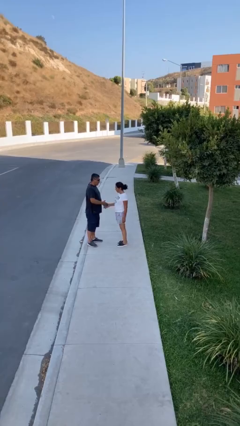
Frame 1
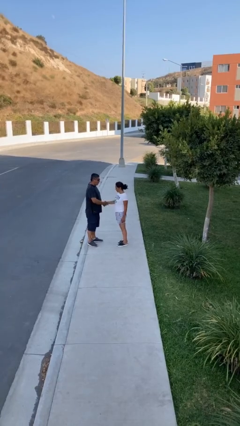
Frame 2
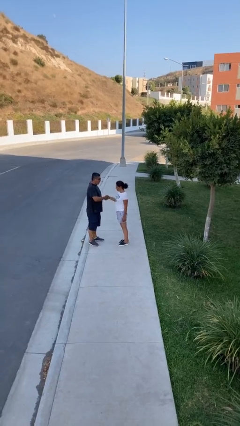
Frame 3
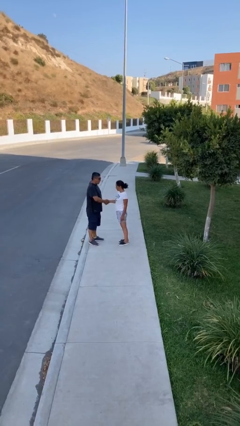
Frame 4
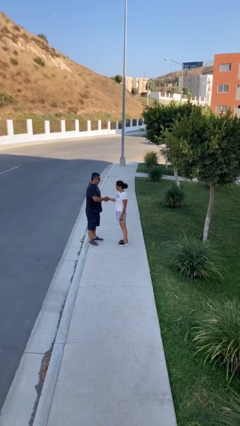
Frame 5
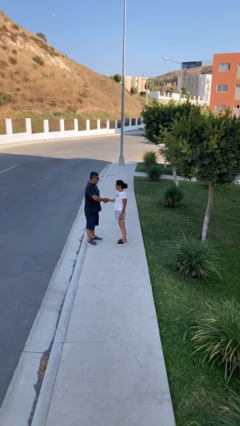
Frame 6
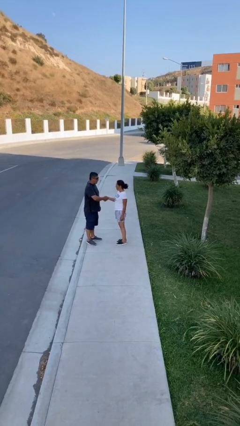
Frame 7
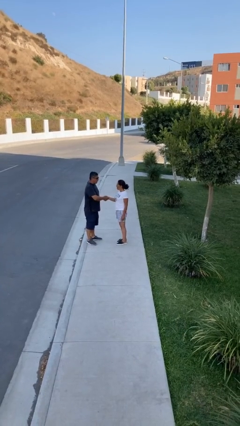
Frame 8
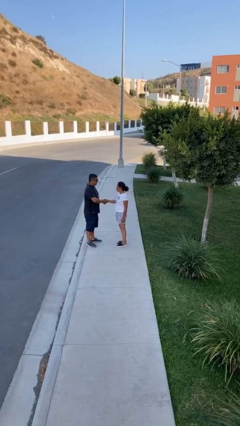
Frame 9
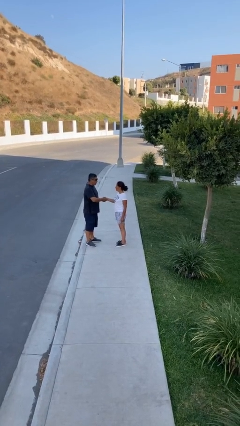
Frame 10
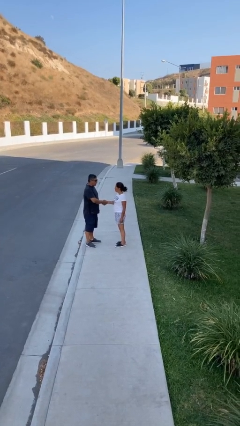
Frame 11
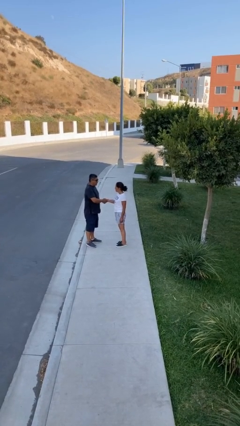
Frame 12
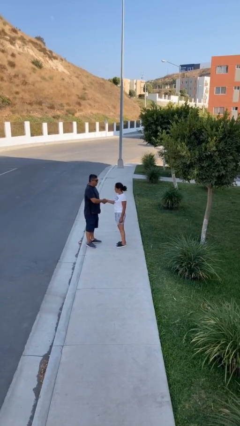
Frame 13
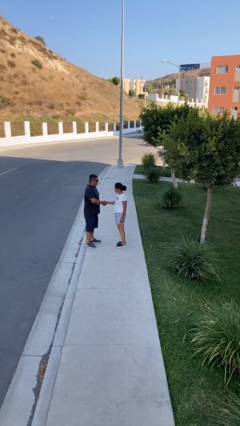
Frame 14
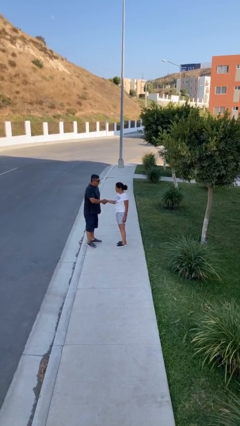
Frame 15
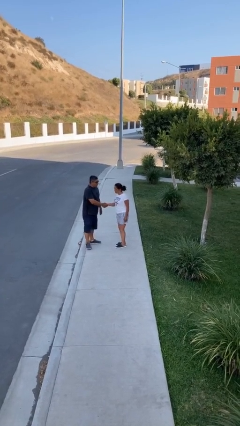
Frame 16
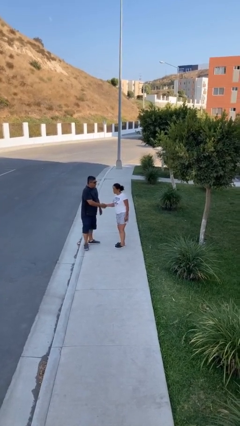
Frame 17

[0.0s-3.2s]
person shakes hand

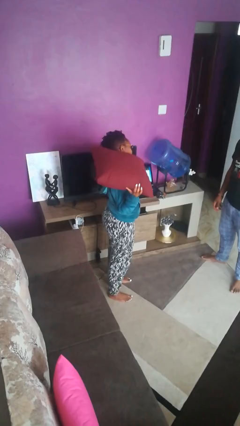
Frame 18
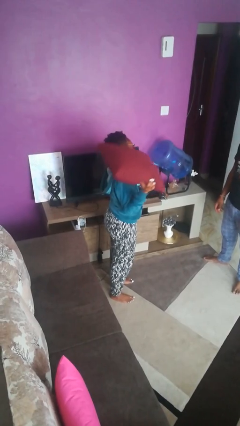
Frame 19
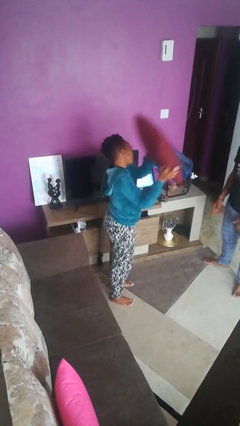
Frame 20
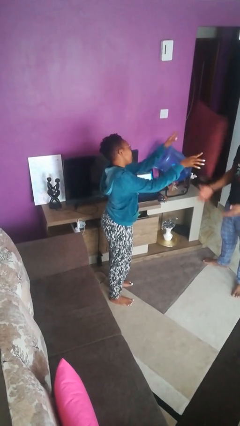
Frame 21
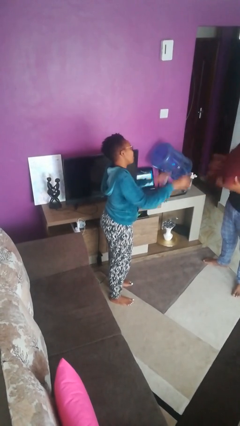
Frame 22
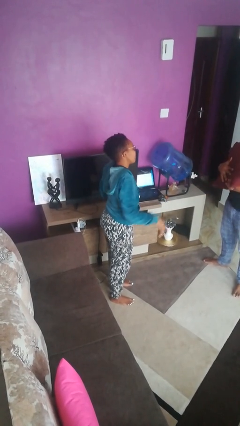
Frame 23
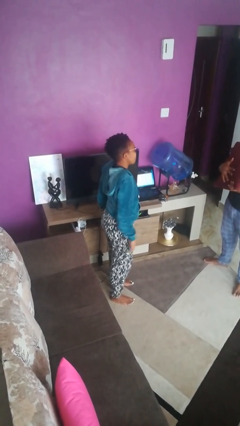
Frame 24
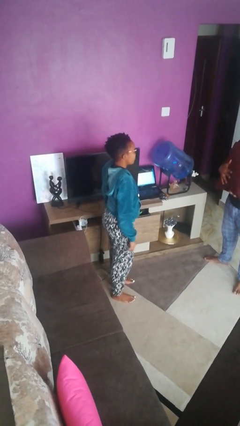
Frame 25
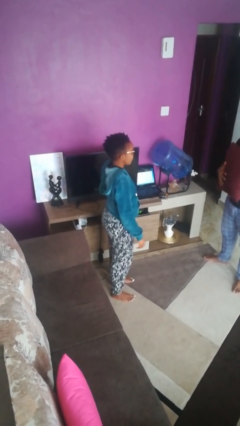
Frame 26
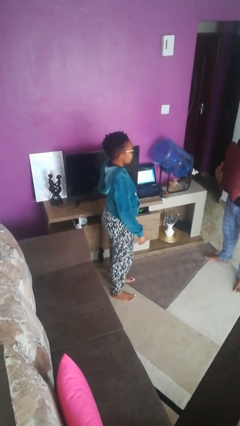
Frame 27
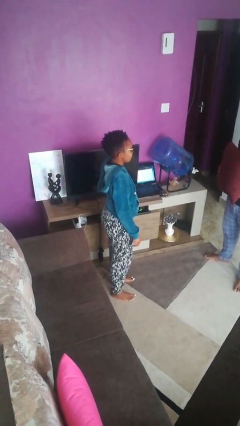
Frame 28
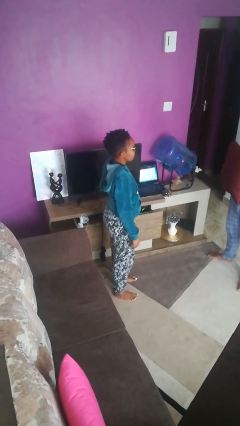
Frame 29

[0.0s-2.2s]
person throws object to person

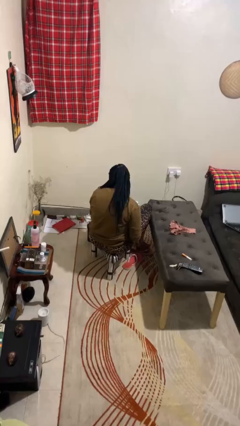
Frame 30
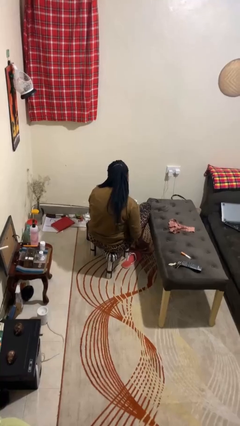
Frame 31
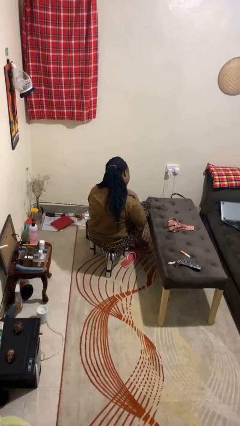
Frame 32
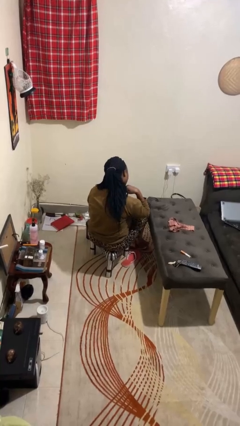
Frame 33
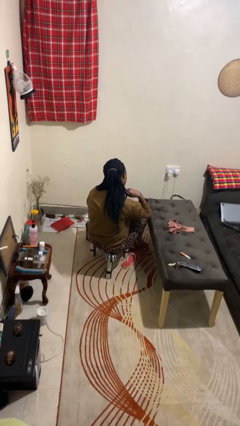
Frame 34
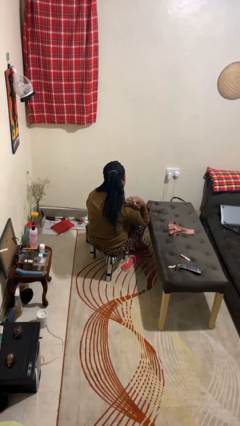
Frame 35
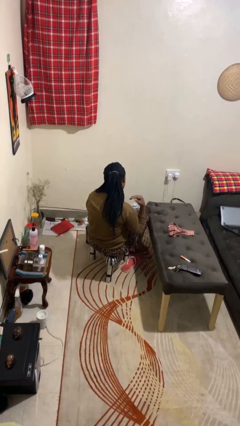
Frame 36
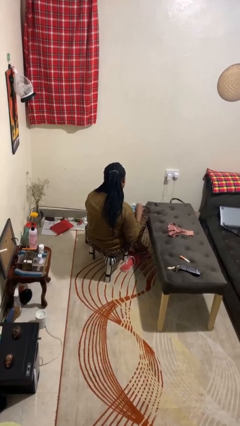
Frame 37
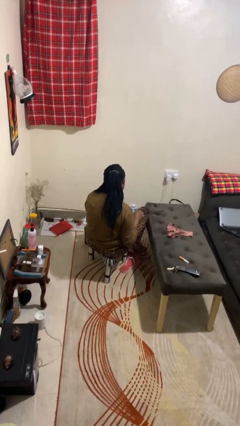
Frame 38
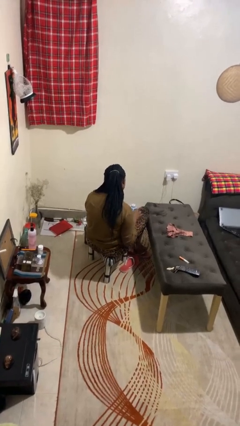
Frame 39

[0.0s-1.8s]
person gestures cut

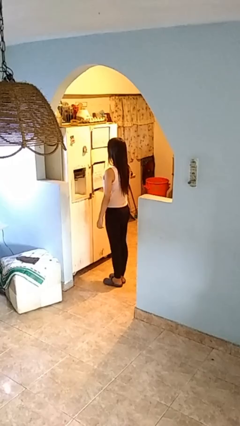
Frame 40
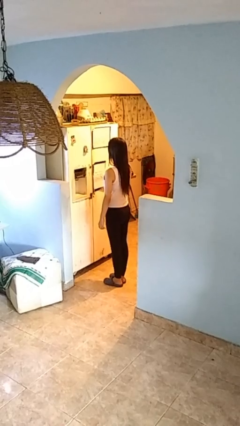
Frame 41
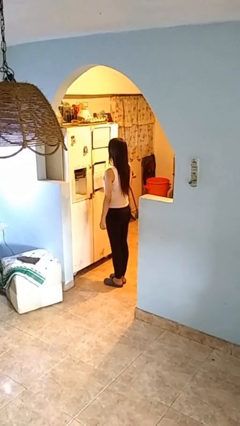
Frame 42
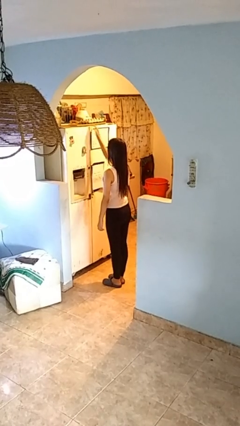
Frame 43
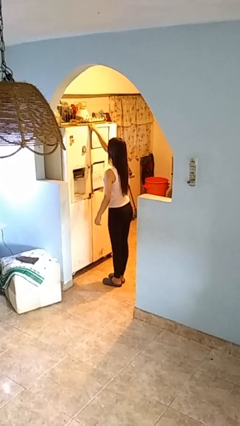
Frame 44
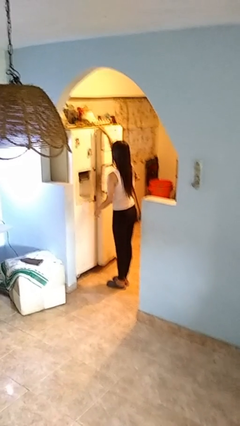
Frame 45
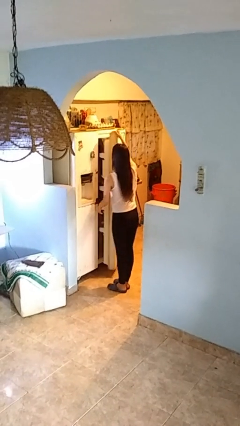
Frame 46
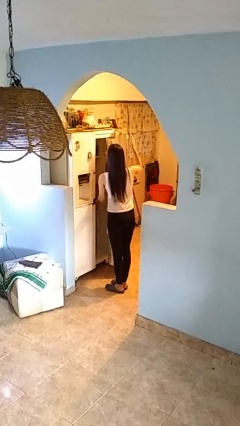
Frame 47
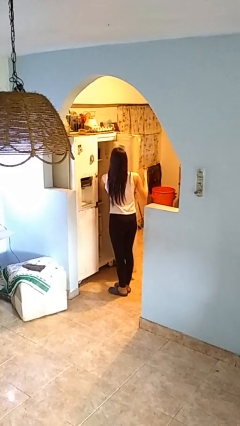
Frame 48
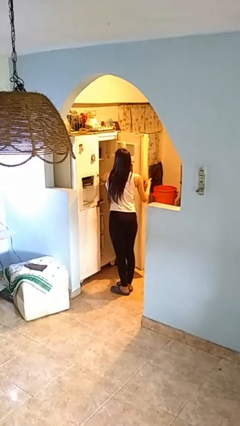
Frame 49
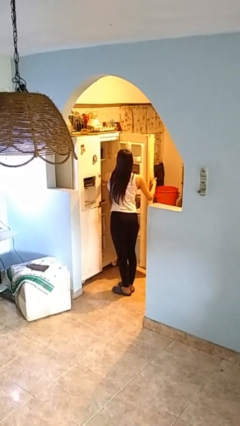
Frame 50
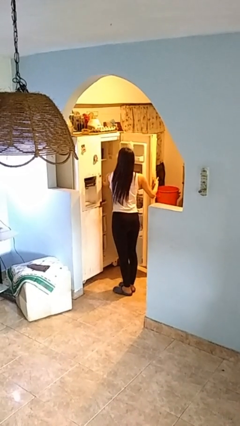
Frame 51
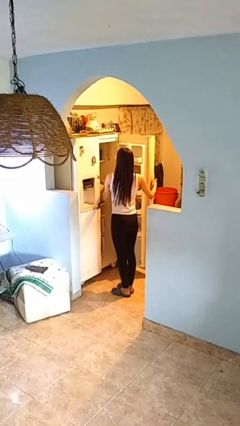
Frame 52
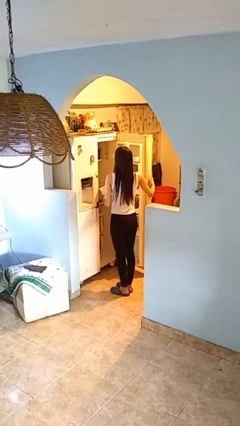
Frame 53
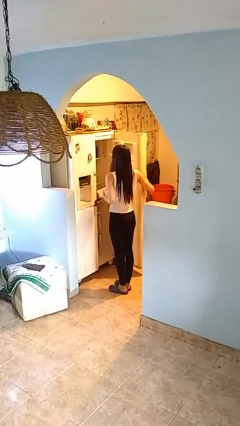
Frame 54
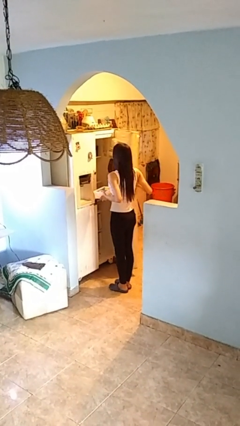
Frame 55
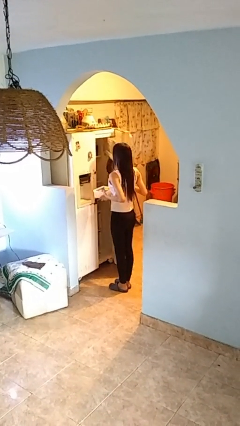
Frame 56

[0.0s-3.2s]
person takes object from refrigerator

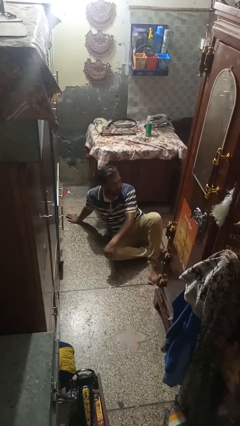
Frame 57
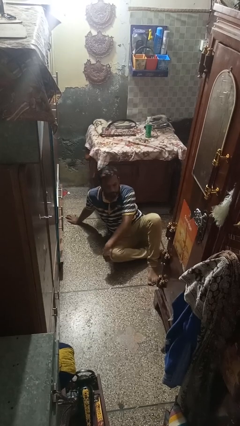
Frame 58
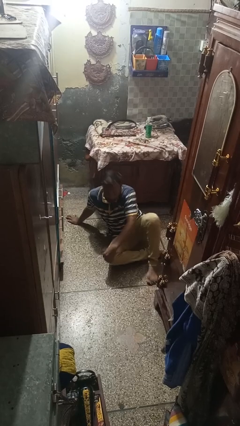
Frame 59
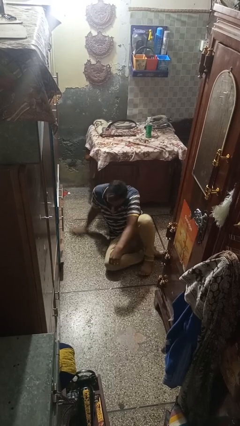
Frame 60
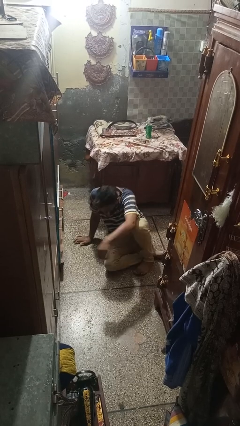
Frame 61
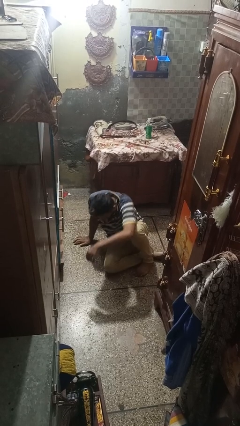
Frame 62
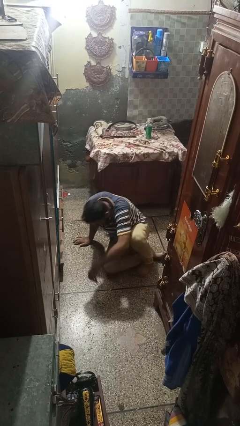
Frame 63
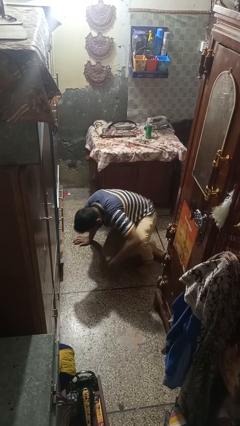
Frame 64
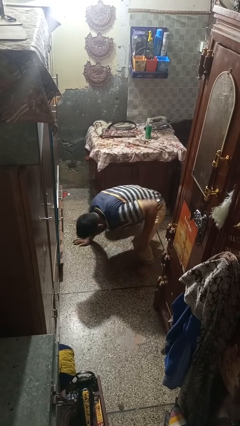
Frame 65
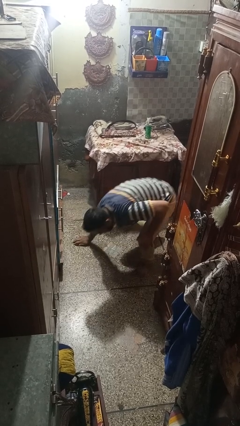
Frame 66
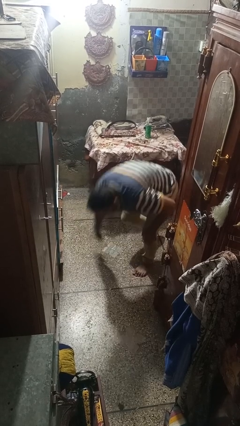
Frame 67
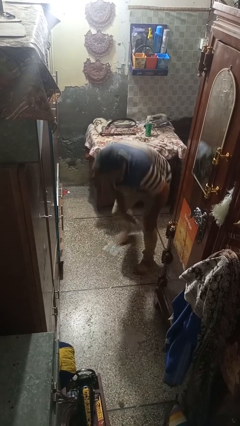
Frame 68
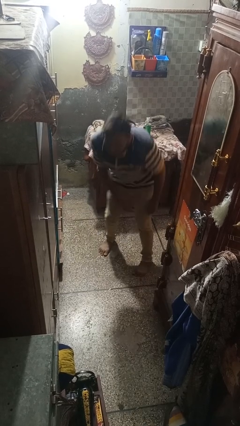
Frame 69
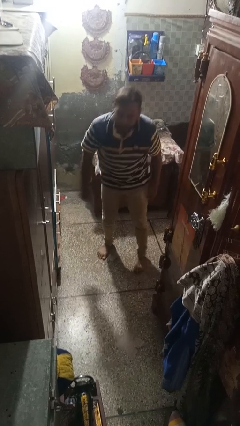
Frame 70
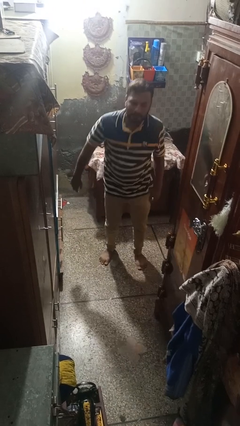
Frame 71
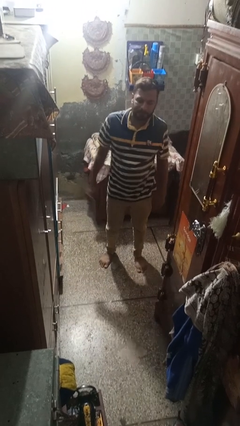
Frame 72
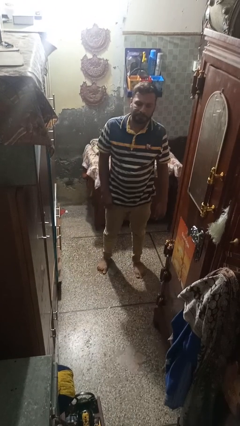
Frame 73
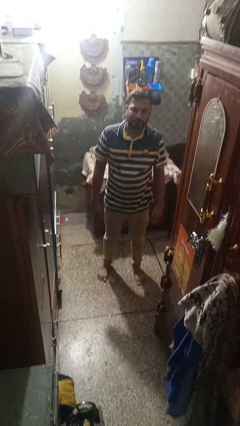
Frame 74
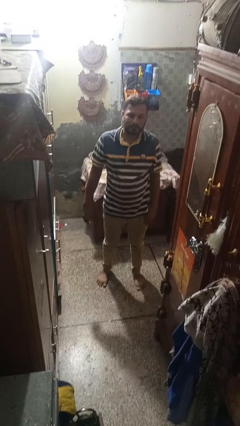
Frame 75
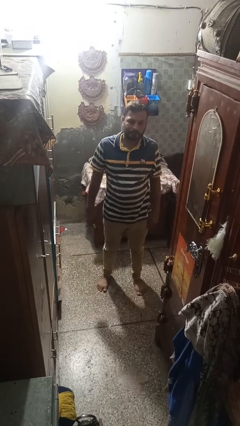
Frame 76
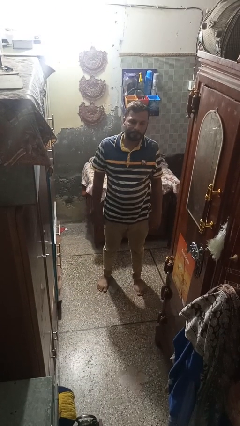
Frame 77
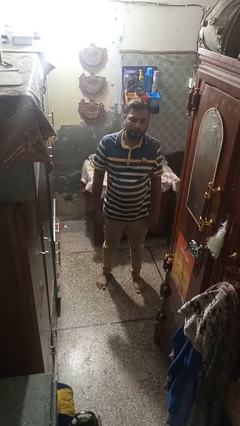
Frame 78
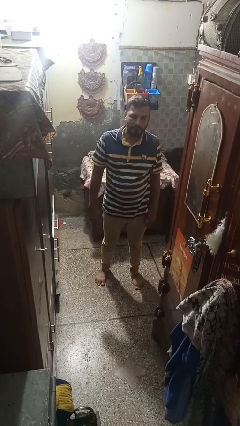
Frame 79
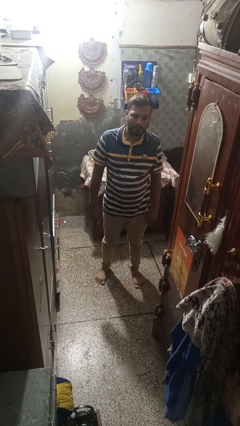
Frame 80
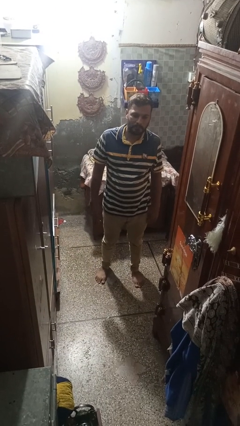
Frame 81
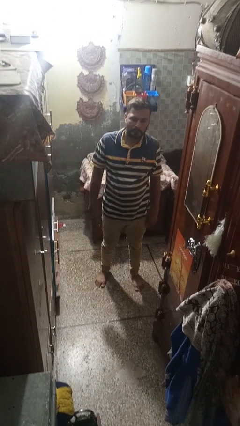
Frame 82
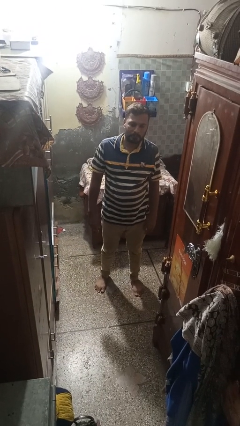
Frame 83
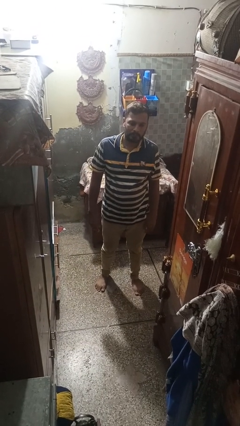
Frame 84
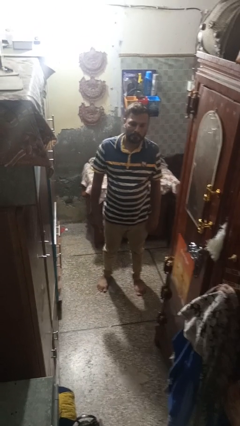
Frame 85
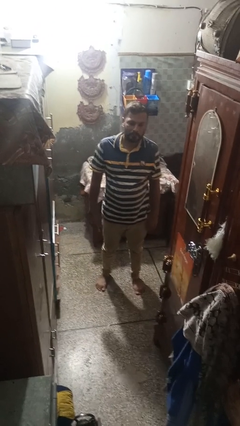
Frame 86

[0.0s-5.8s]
person stands up from floor

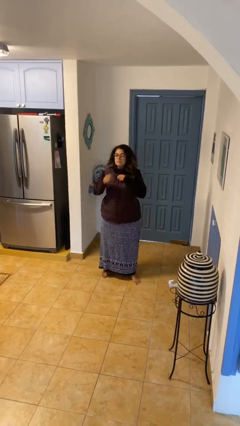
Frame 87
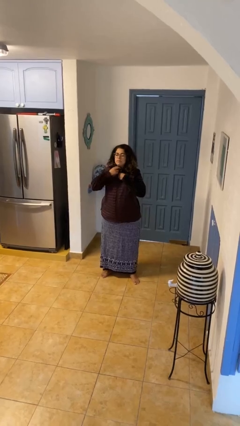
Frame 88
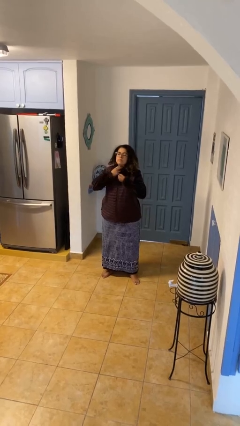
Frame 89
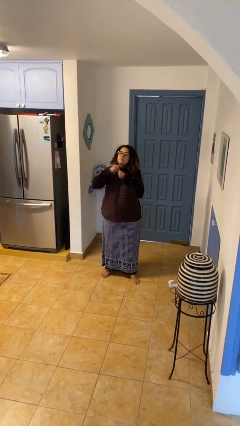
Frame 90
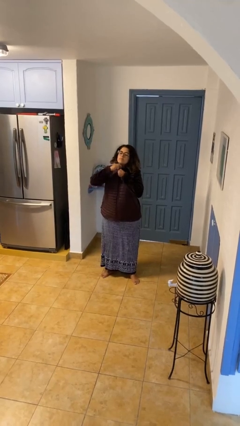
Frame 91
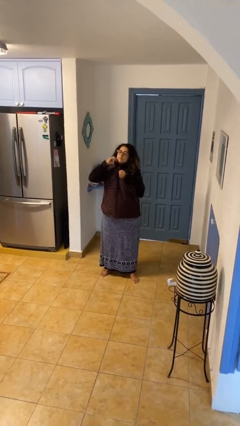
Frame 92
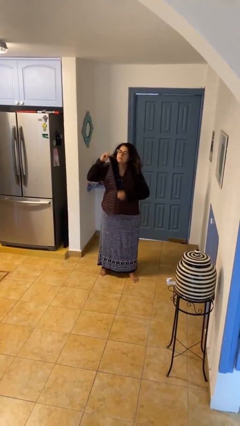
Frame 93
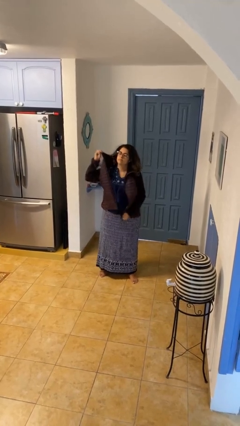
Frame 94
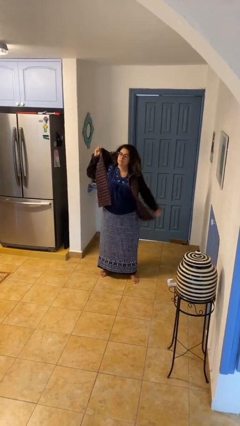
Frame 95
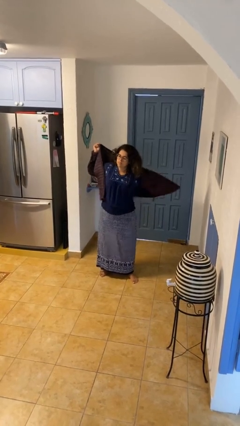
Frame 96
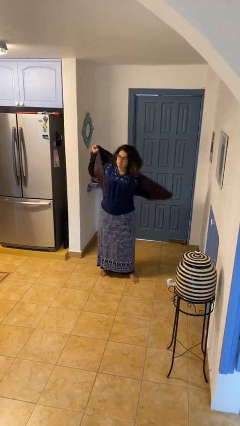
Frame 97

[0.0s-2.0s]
person unzips jacket
